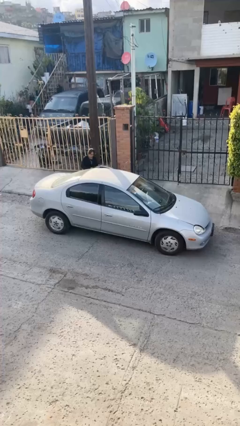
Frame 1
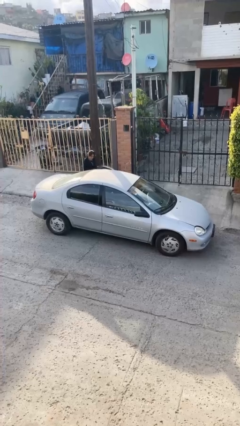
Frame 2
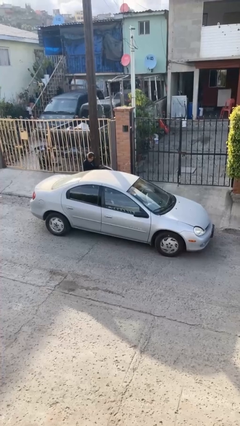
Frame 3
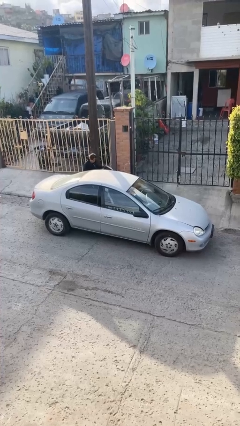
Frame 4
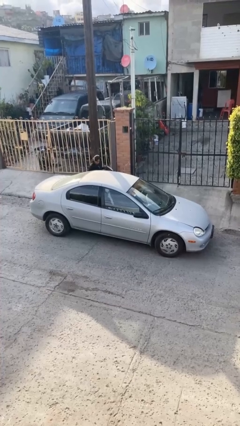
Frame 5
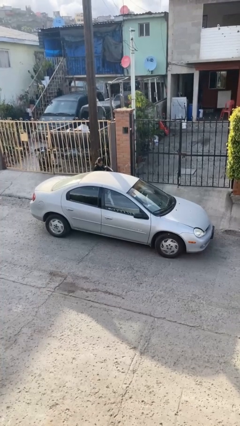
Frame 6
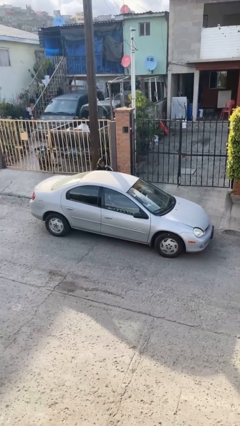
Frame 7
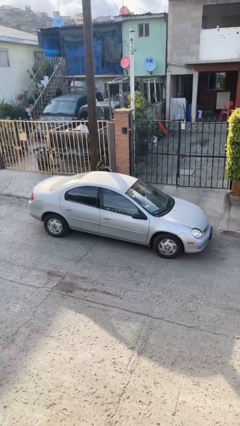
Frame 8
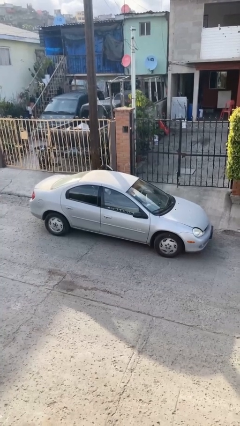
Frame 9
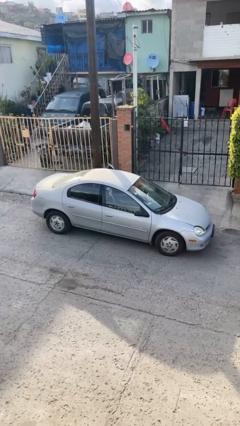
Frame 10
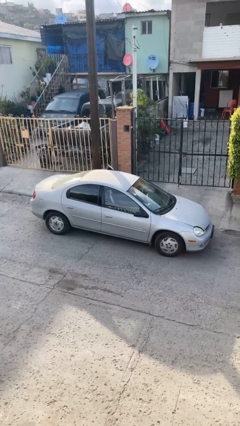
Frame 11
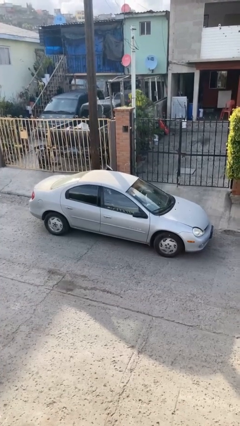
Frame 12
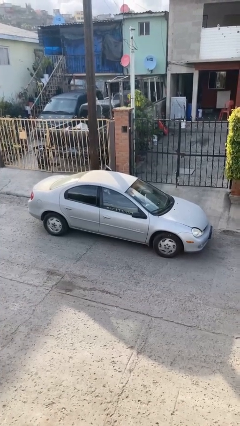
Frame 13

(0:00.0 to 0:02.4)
car picks up person

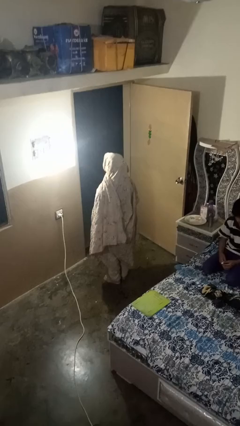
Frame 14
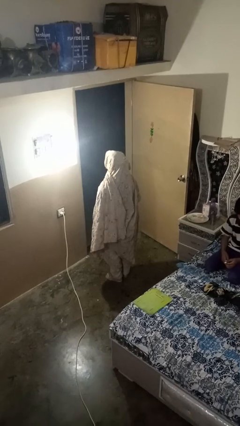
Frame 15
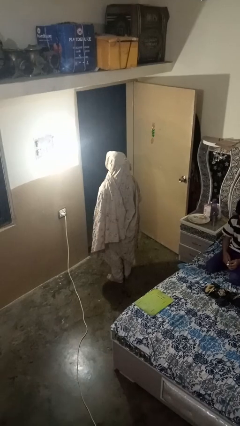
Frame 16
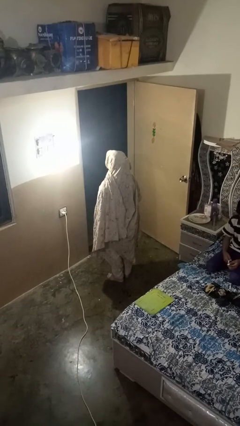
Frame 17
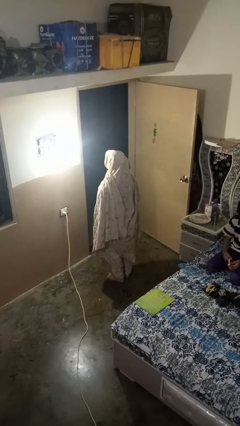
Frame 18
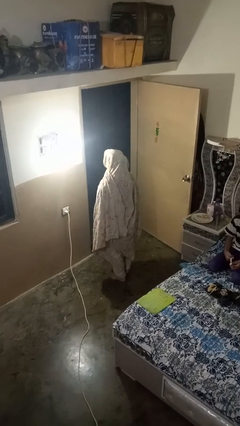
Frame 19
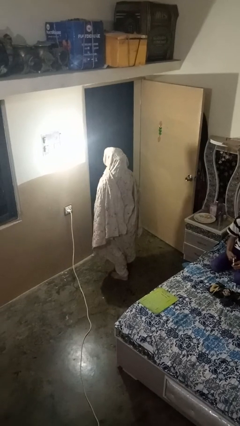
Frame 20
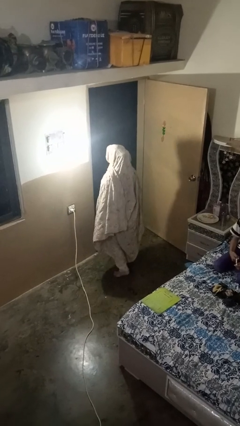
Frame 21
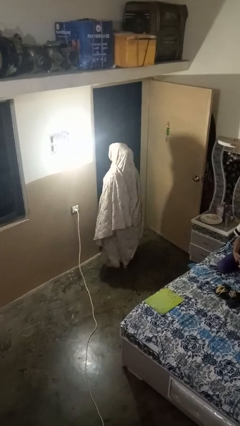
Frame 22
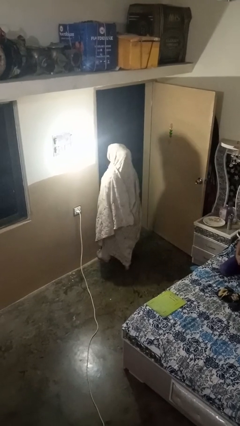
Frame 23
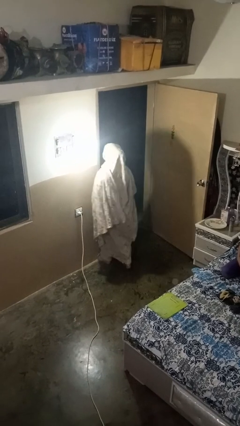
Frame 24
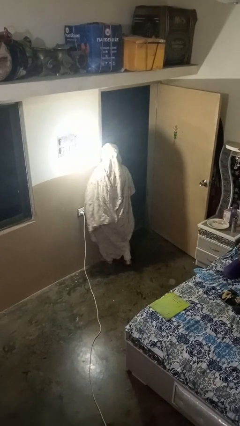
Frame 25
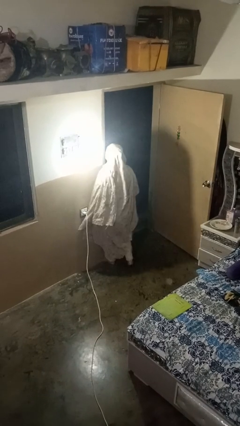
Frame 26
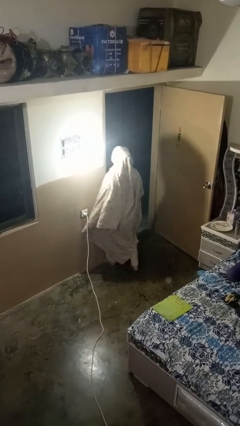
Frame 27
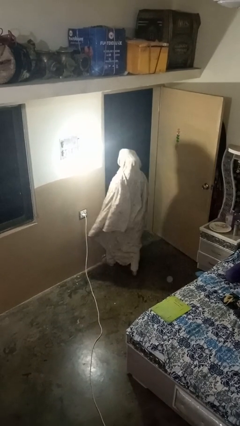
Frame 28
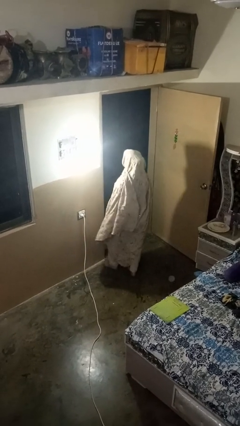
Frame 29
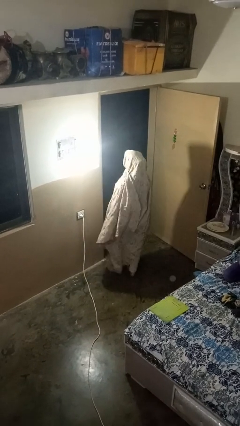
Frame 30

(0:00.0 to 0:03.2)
person bumps into wall

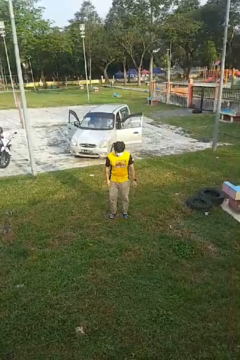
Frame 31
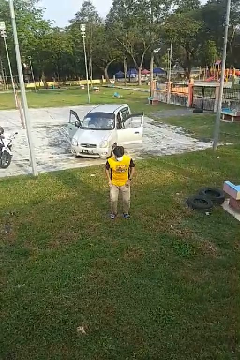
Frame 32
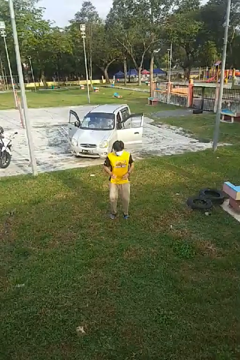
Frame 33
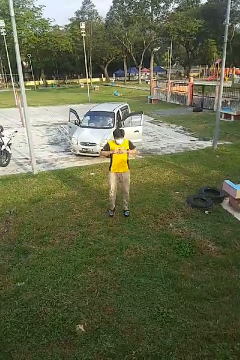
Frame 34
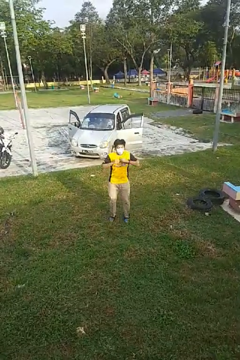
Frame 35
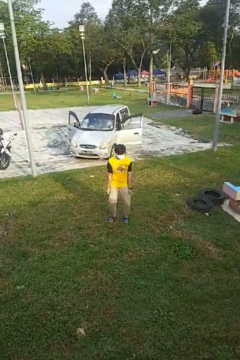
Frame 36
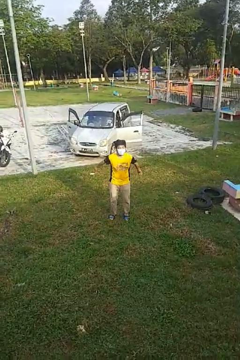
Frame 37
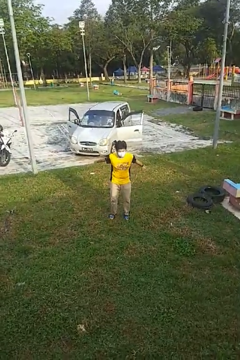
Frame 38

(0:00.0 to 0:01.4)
person jumps

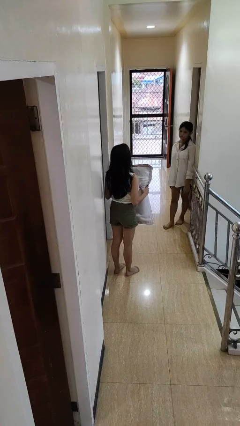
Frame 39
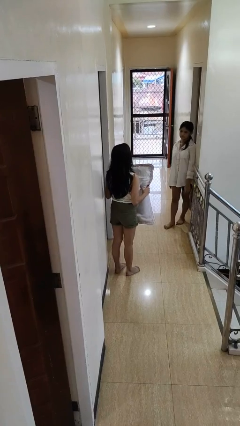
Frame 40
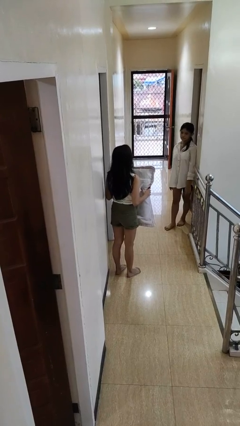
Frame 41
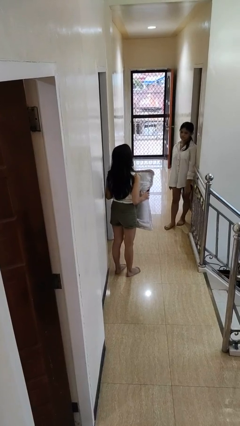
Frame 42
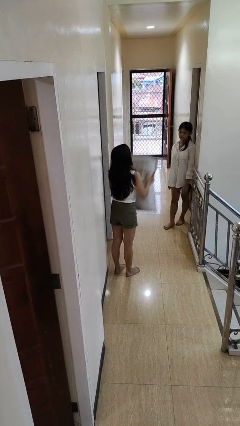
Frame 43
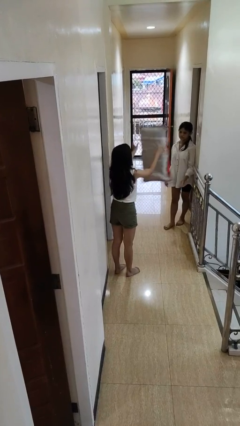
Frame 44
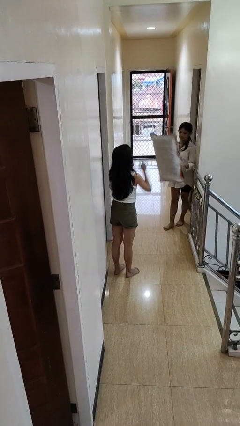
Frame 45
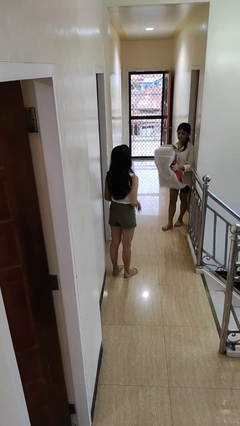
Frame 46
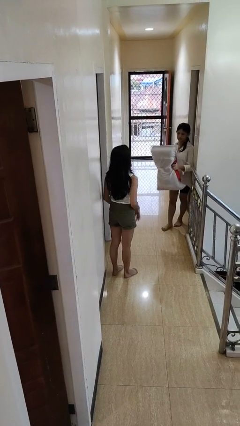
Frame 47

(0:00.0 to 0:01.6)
person throws object to person

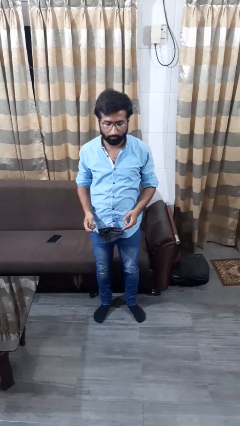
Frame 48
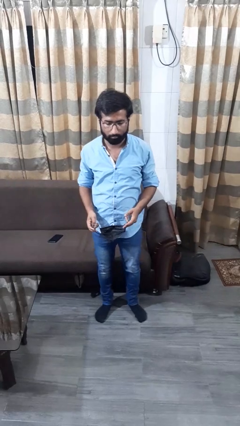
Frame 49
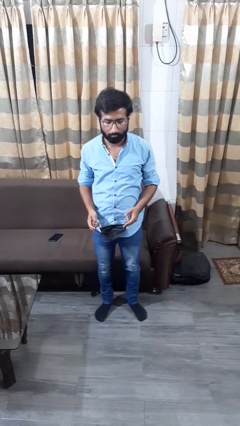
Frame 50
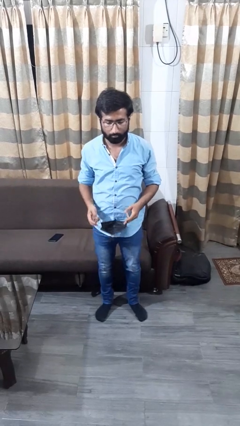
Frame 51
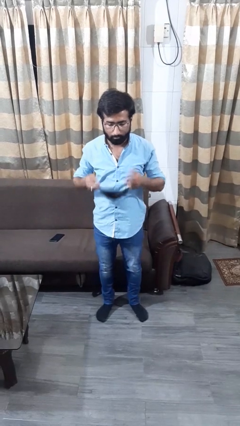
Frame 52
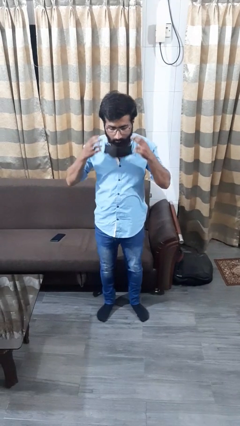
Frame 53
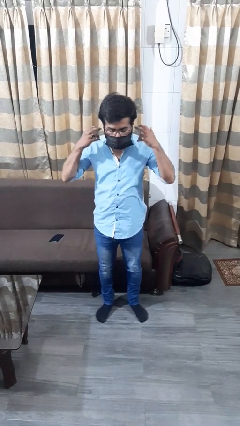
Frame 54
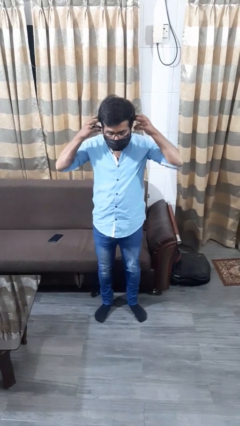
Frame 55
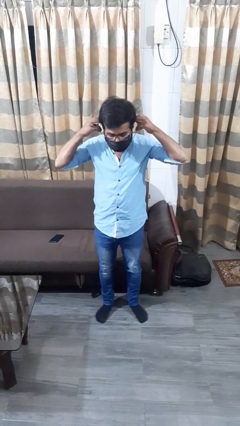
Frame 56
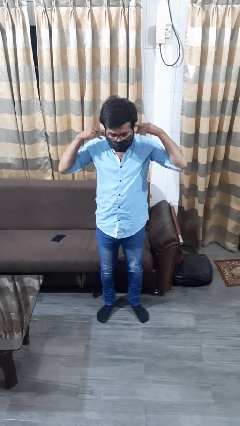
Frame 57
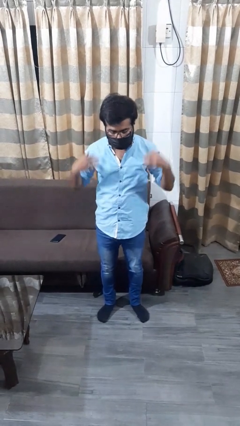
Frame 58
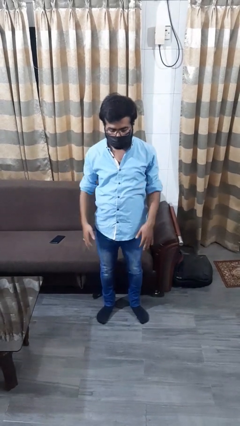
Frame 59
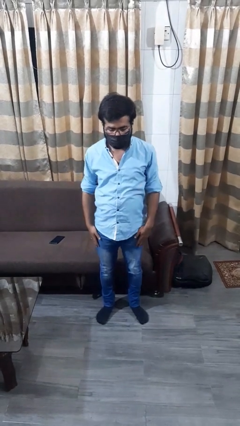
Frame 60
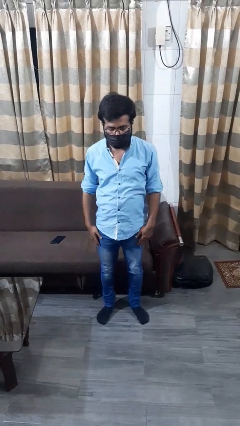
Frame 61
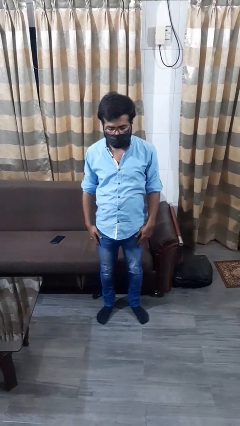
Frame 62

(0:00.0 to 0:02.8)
person puts on facemask

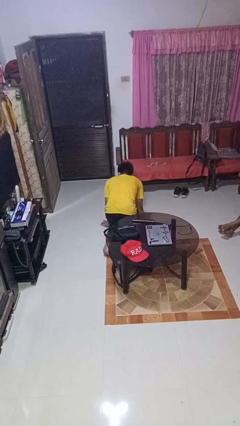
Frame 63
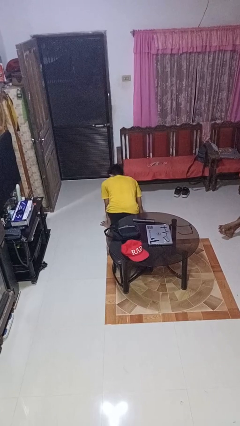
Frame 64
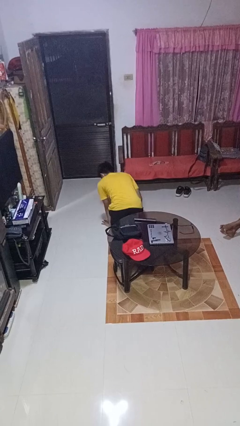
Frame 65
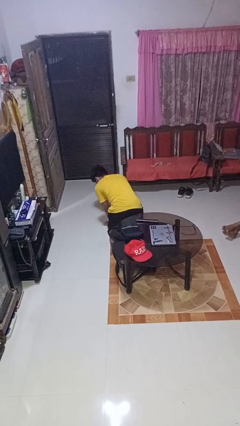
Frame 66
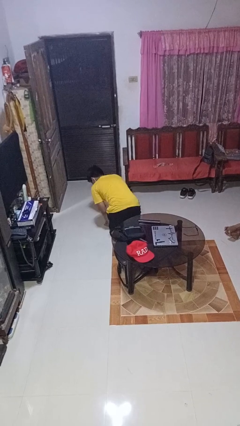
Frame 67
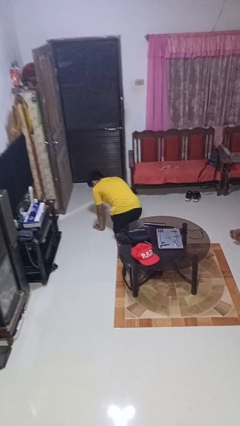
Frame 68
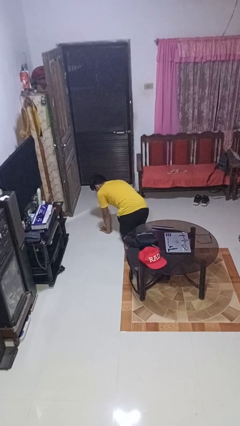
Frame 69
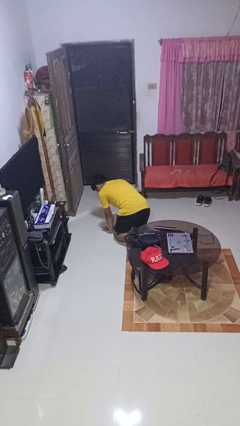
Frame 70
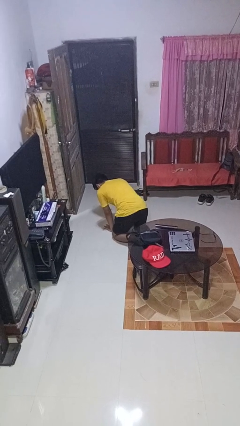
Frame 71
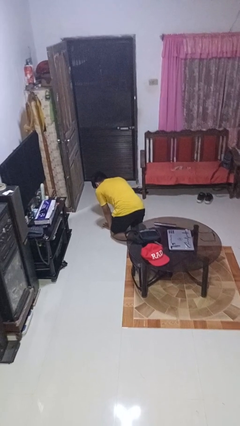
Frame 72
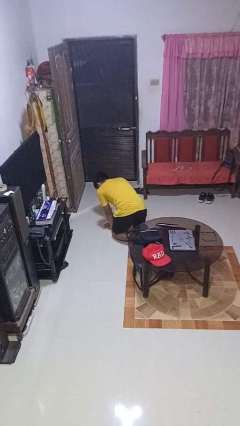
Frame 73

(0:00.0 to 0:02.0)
person crawls

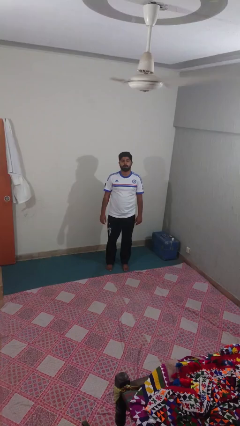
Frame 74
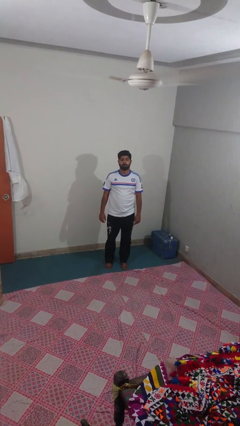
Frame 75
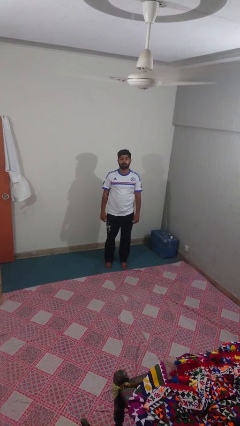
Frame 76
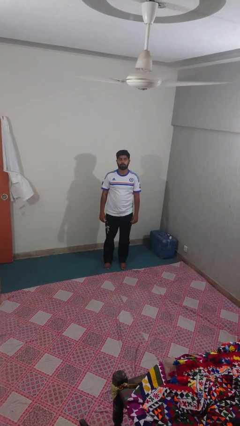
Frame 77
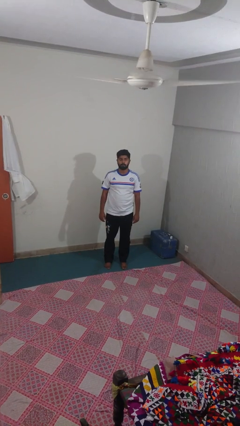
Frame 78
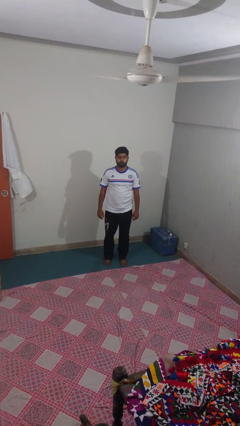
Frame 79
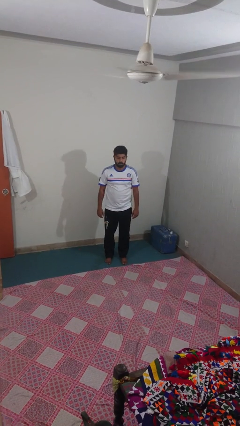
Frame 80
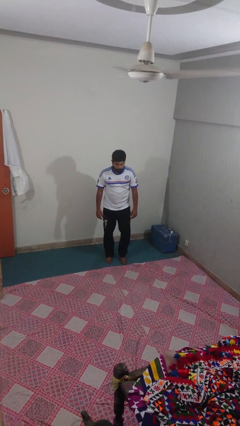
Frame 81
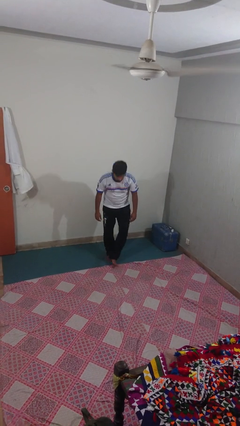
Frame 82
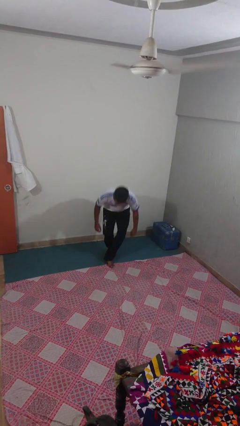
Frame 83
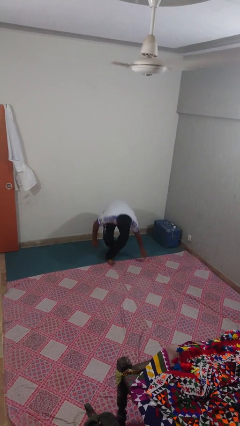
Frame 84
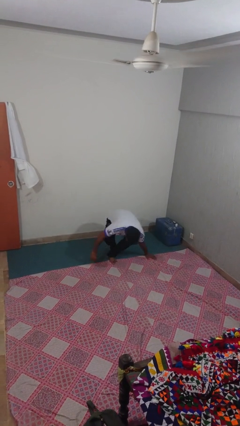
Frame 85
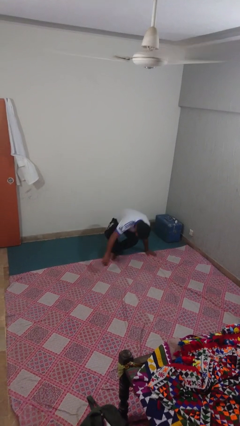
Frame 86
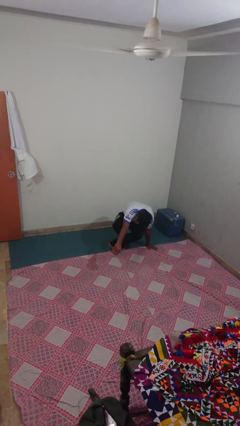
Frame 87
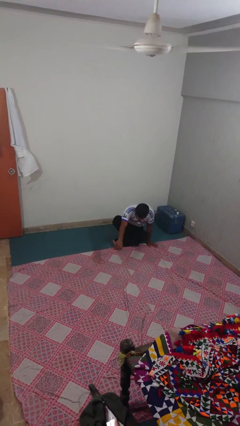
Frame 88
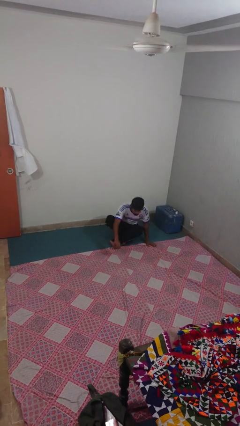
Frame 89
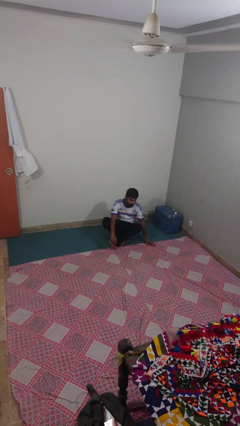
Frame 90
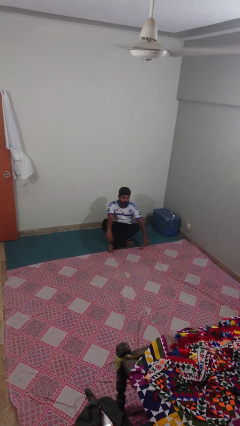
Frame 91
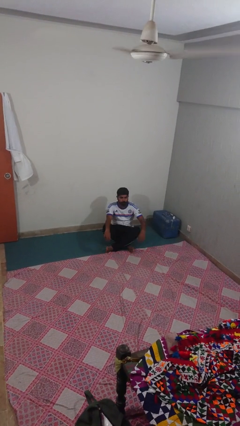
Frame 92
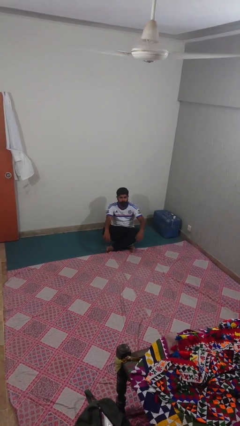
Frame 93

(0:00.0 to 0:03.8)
person sits crisscross
